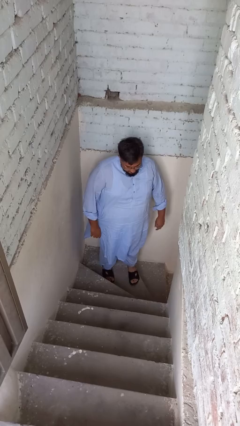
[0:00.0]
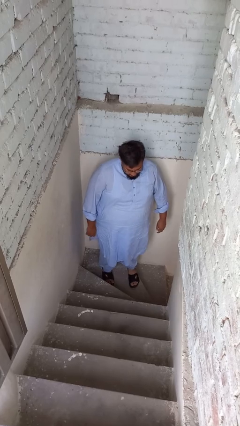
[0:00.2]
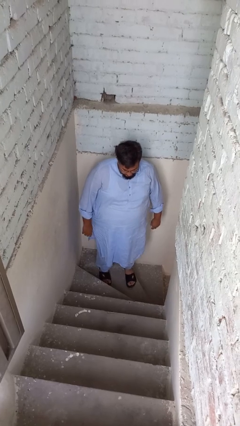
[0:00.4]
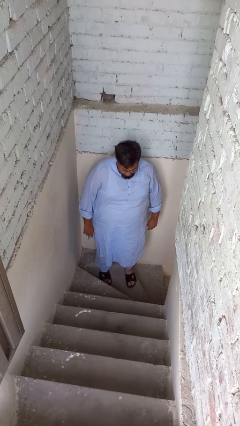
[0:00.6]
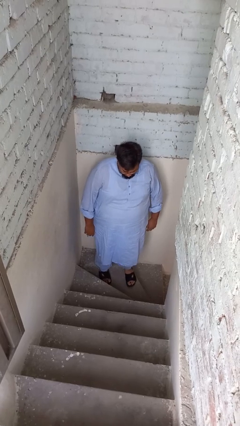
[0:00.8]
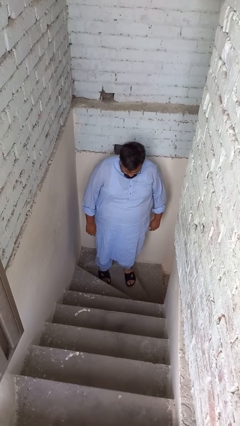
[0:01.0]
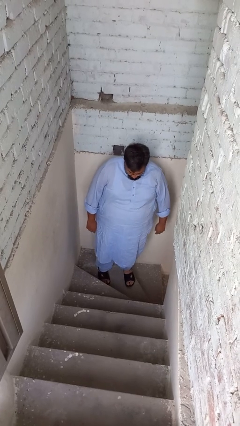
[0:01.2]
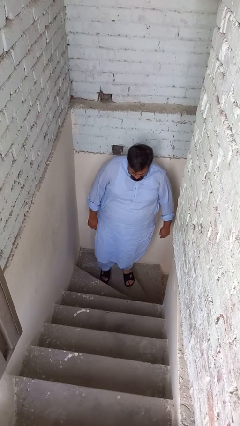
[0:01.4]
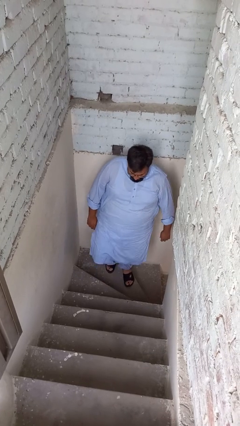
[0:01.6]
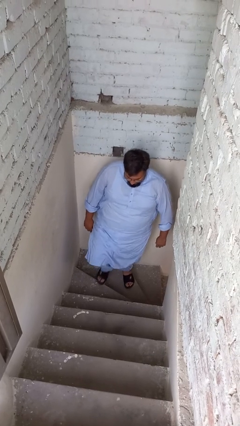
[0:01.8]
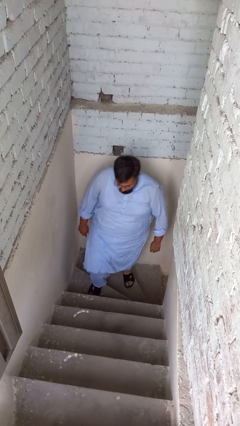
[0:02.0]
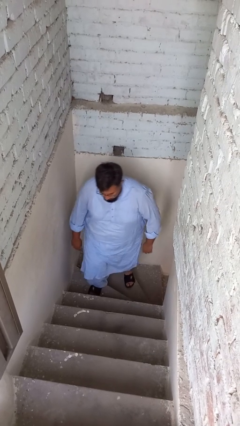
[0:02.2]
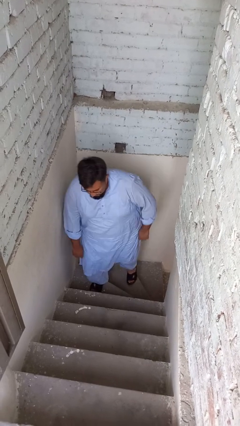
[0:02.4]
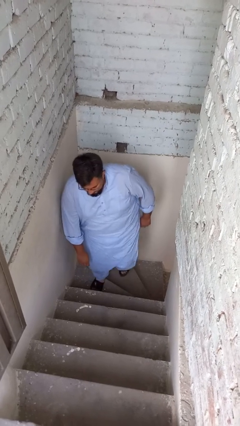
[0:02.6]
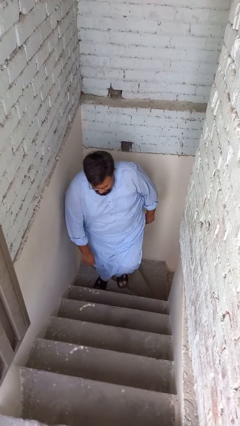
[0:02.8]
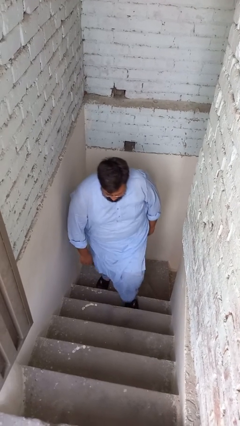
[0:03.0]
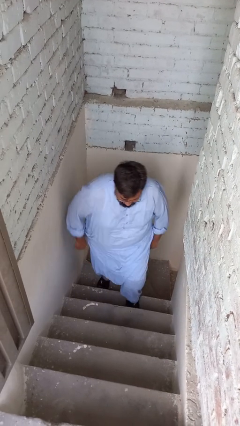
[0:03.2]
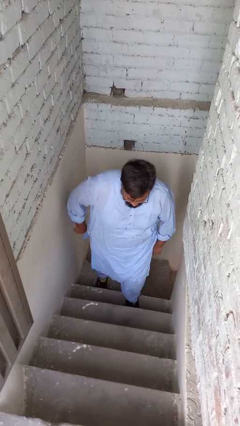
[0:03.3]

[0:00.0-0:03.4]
person climbs up stairs

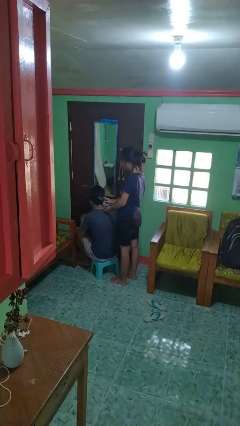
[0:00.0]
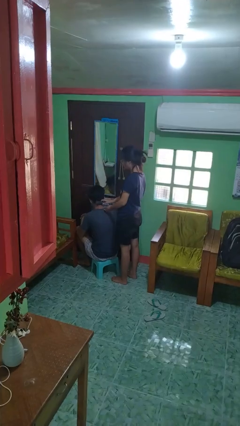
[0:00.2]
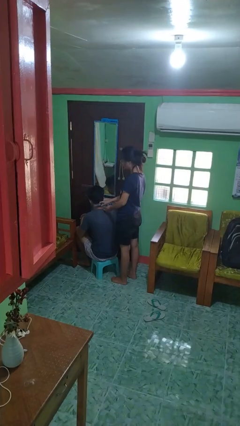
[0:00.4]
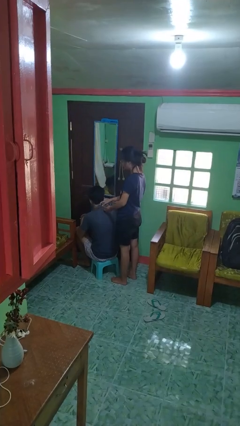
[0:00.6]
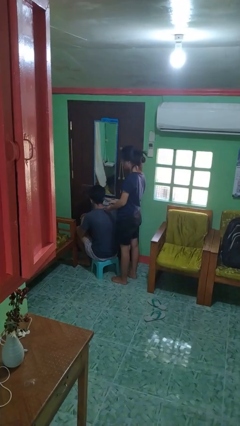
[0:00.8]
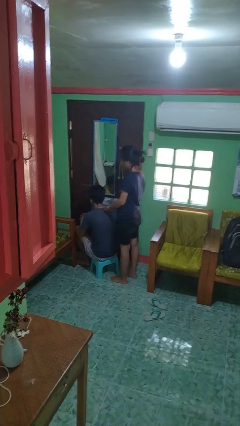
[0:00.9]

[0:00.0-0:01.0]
person brushes hair of person

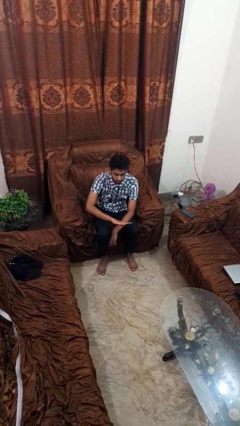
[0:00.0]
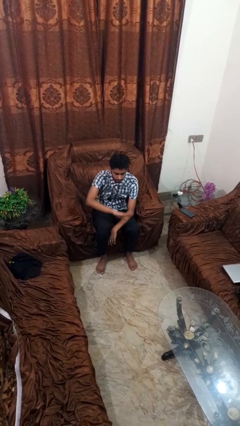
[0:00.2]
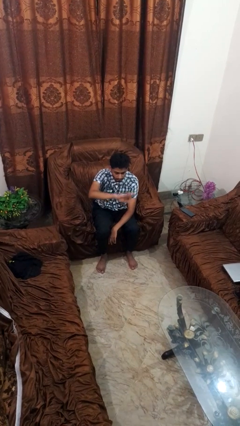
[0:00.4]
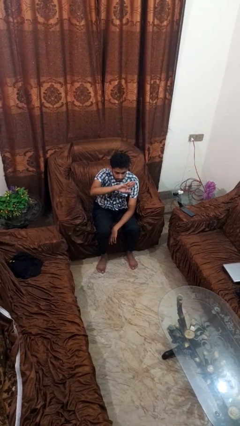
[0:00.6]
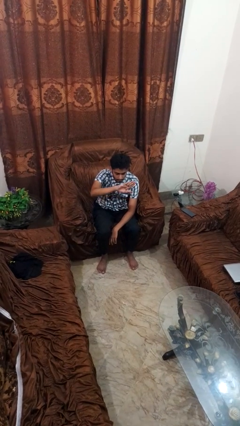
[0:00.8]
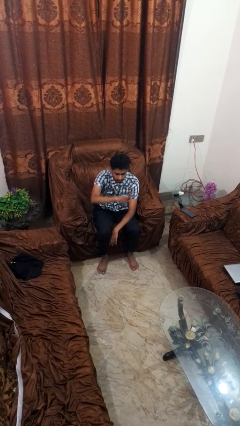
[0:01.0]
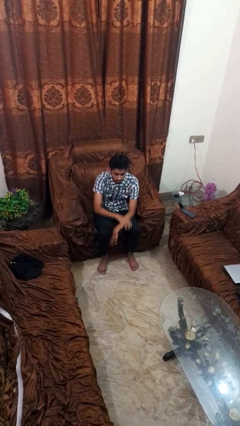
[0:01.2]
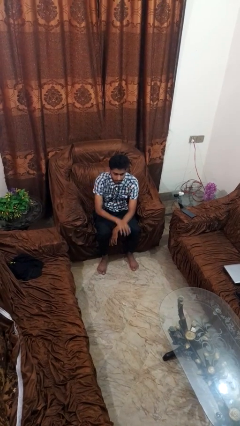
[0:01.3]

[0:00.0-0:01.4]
person gestures swipe up

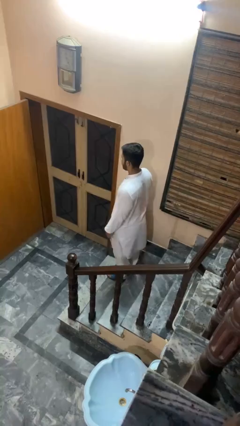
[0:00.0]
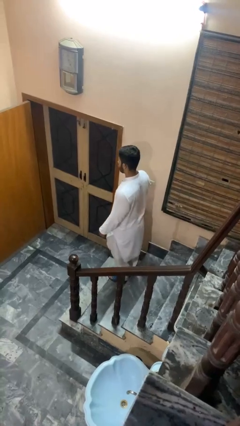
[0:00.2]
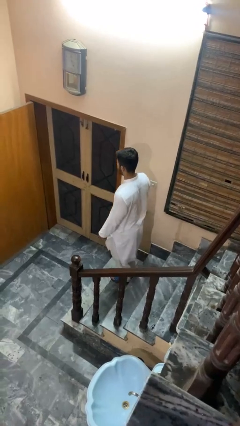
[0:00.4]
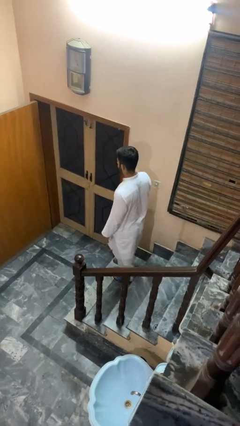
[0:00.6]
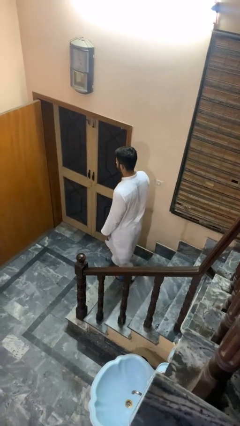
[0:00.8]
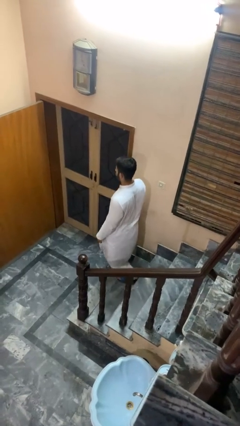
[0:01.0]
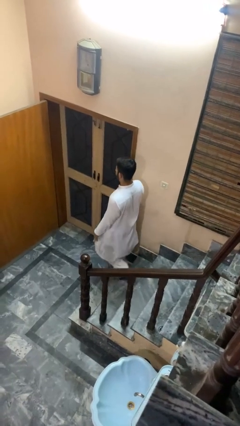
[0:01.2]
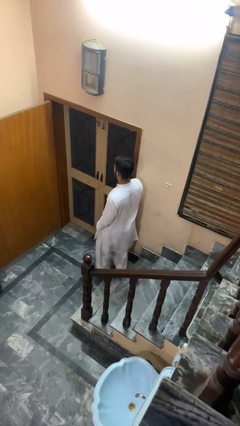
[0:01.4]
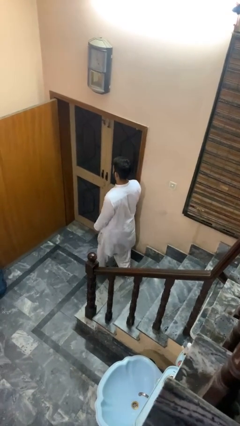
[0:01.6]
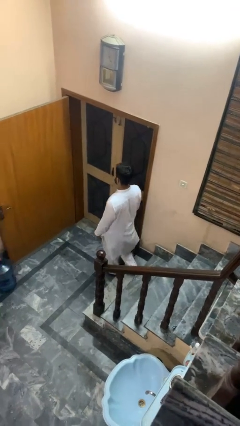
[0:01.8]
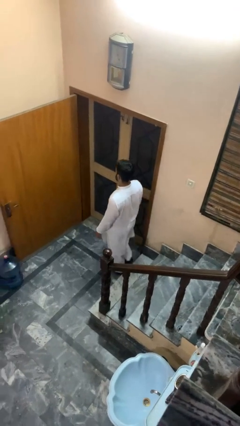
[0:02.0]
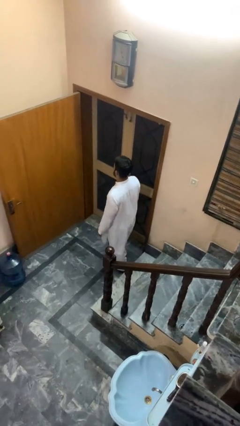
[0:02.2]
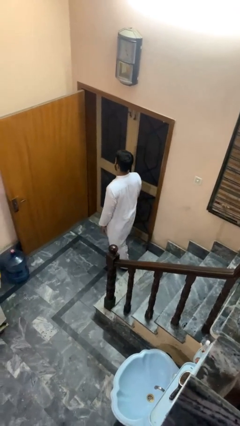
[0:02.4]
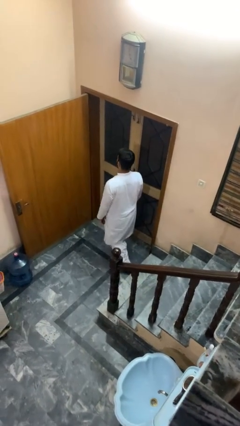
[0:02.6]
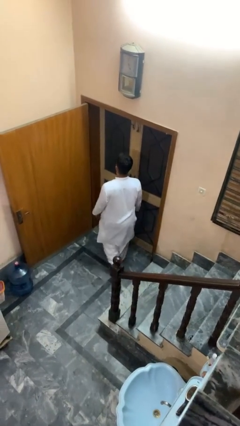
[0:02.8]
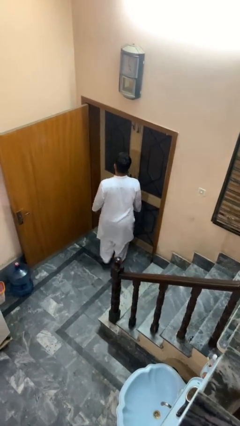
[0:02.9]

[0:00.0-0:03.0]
person climbs down stairs

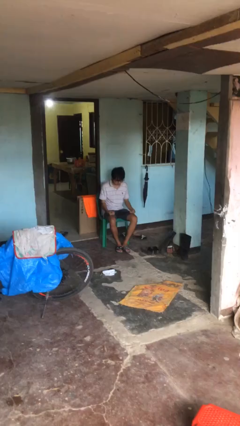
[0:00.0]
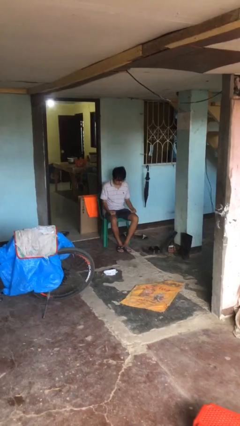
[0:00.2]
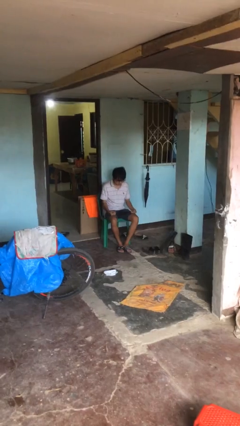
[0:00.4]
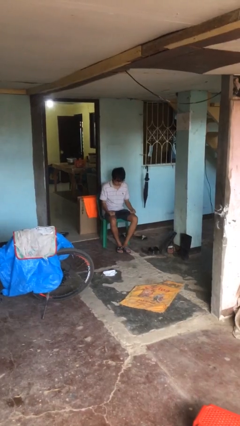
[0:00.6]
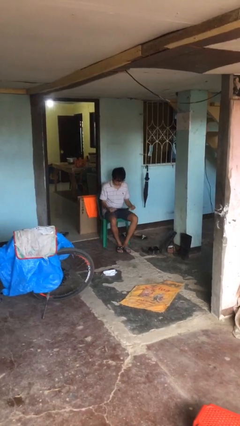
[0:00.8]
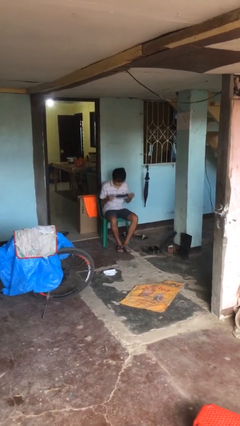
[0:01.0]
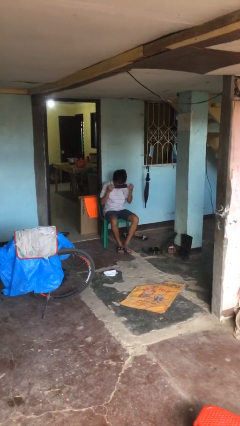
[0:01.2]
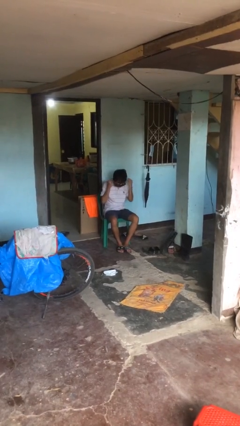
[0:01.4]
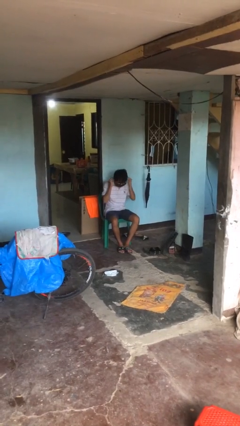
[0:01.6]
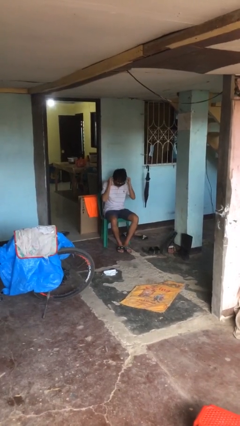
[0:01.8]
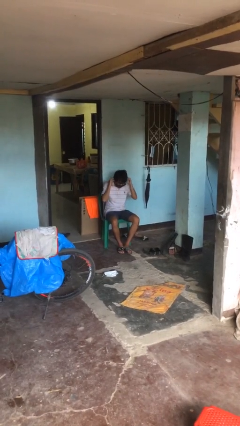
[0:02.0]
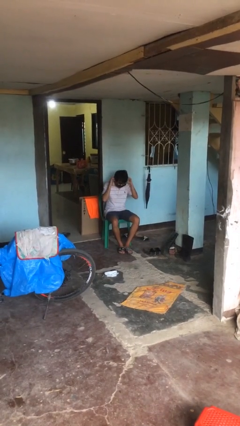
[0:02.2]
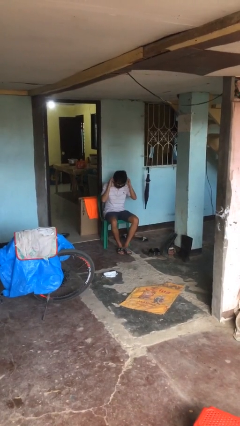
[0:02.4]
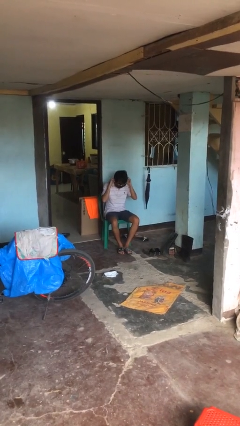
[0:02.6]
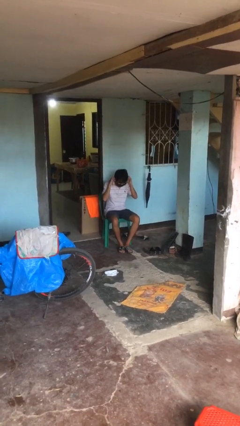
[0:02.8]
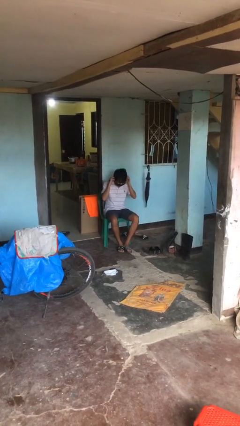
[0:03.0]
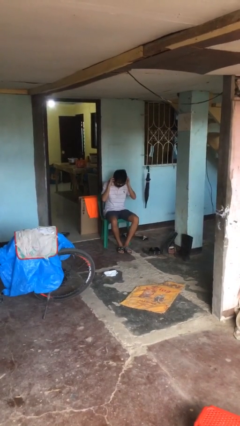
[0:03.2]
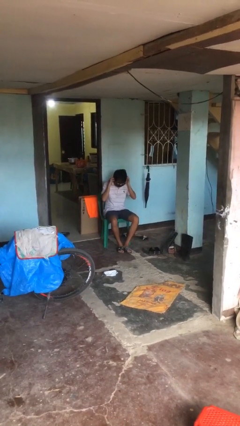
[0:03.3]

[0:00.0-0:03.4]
person puts on facemask

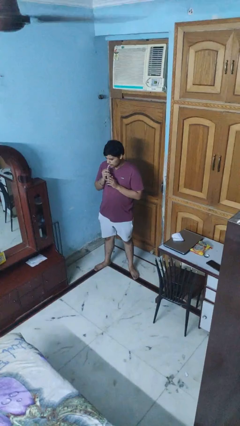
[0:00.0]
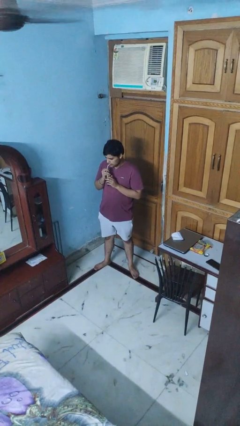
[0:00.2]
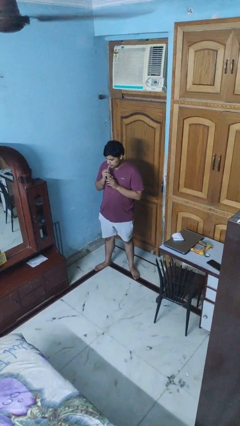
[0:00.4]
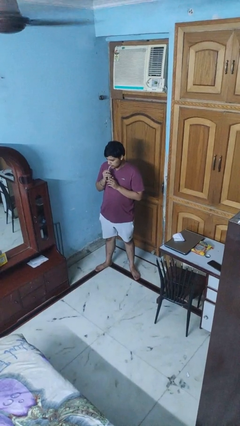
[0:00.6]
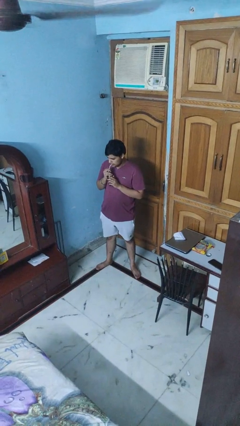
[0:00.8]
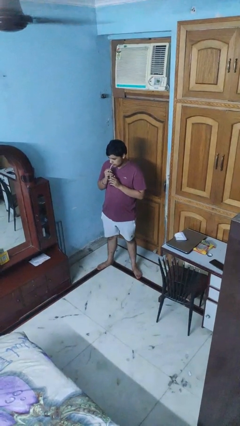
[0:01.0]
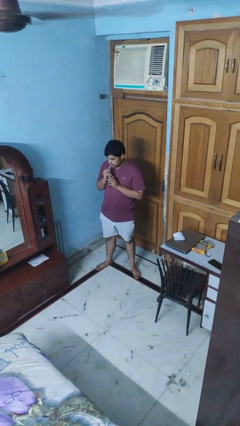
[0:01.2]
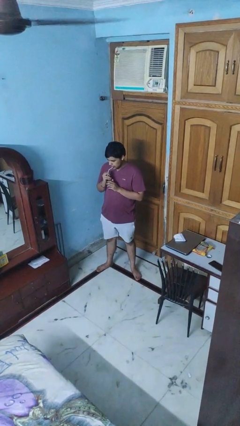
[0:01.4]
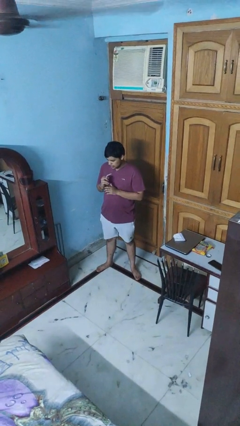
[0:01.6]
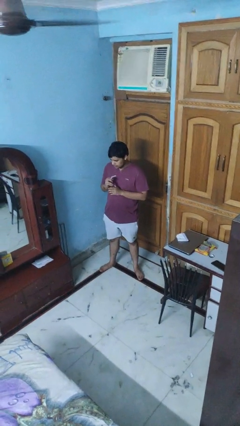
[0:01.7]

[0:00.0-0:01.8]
person drinks from straw

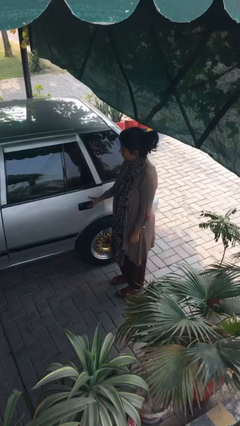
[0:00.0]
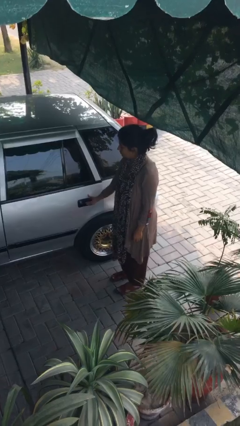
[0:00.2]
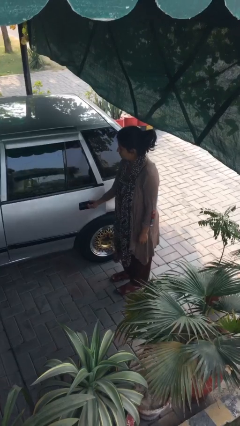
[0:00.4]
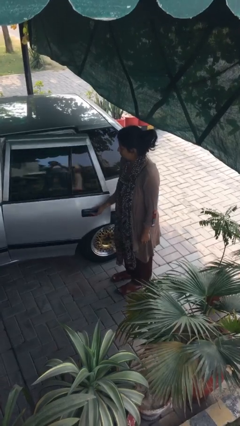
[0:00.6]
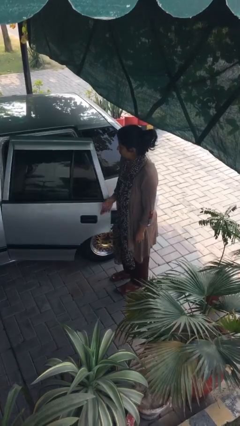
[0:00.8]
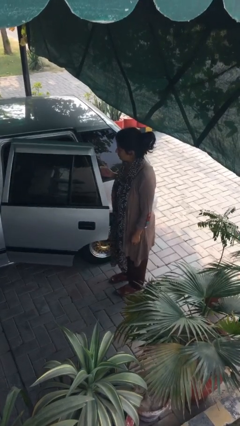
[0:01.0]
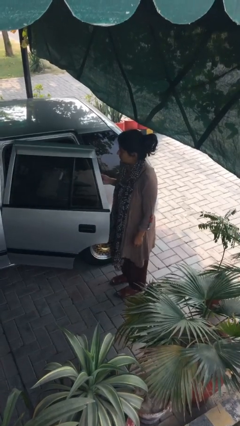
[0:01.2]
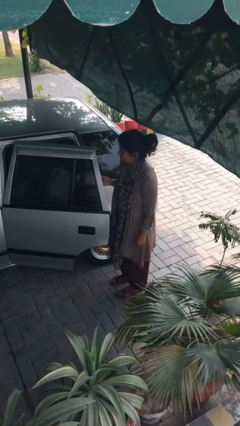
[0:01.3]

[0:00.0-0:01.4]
person opens car door

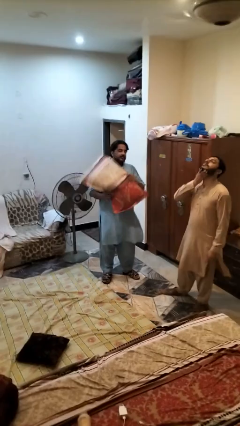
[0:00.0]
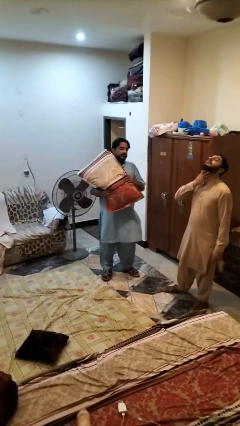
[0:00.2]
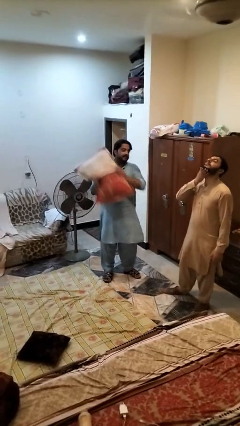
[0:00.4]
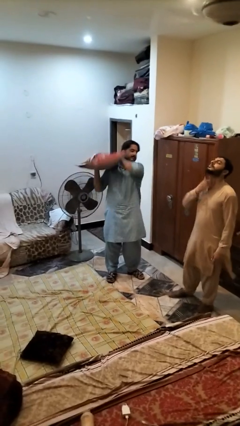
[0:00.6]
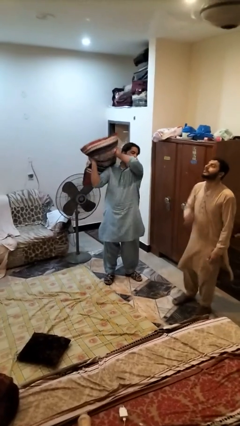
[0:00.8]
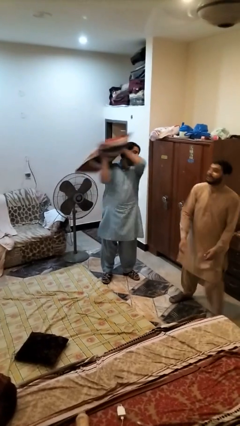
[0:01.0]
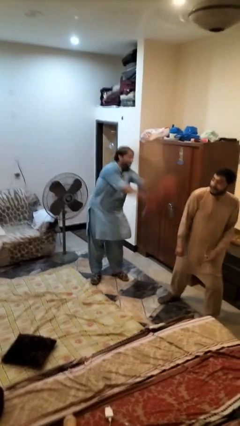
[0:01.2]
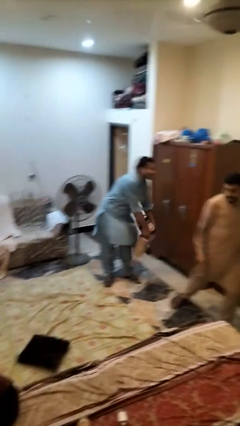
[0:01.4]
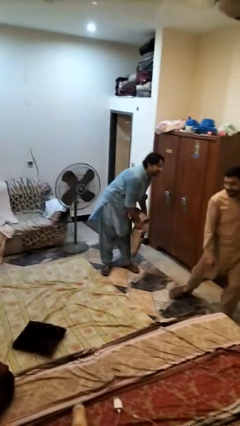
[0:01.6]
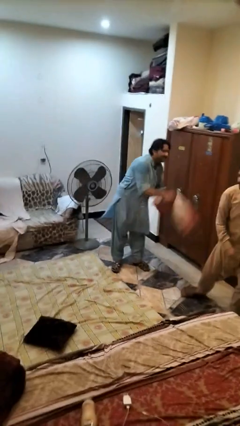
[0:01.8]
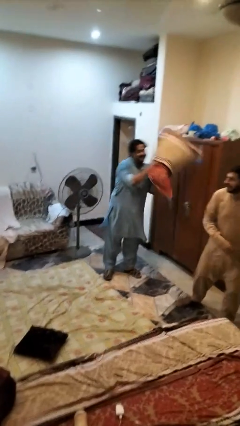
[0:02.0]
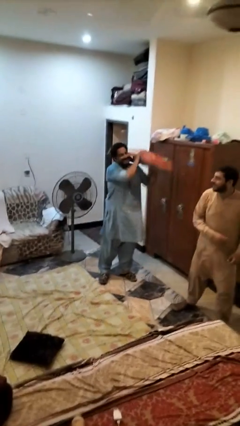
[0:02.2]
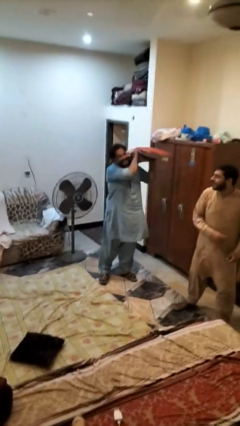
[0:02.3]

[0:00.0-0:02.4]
person hits person with pillow
